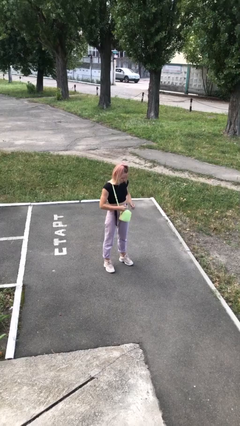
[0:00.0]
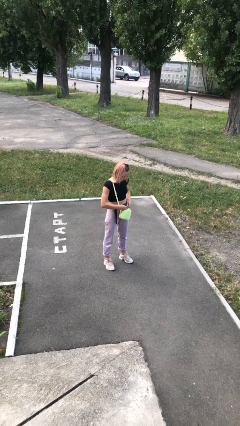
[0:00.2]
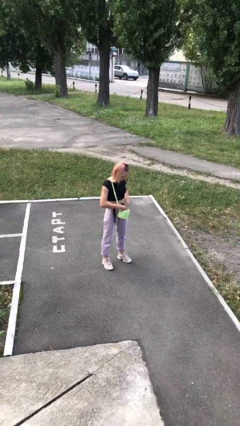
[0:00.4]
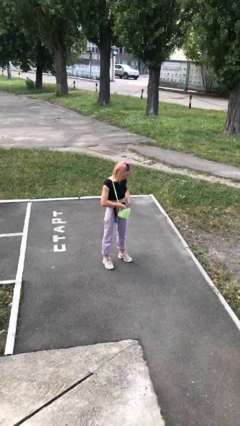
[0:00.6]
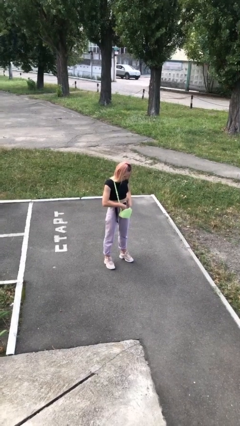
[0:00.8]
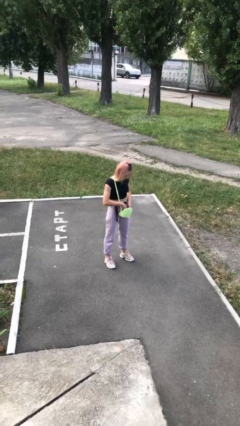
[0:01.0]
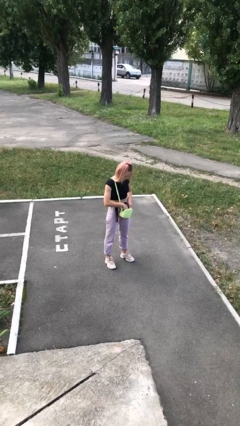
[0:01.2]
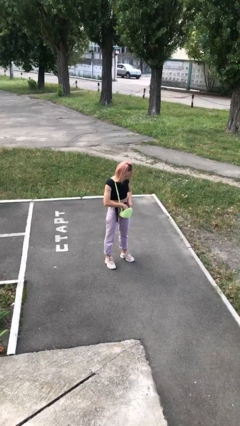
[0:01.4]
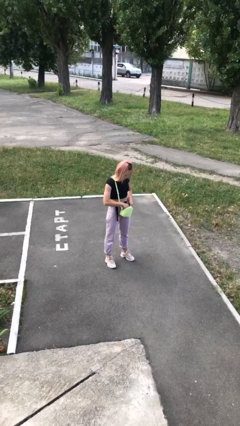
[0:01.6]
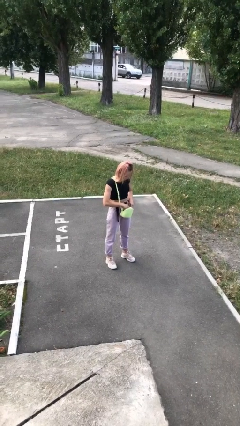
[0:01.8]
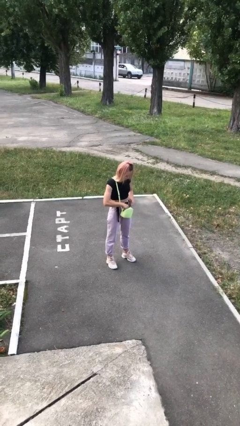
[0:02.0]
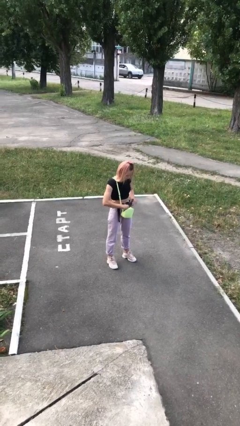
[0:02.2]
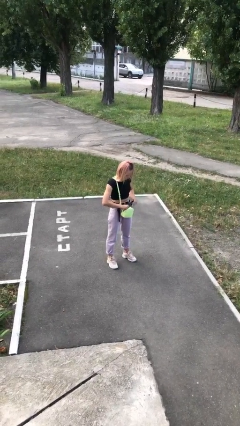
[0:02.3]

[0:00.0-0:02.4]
person searches in backpack

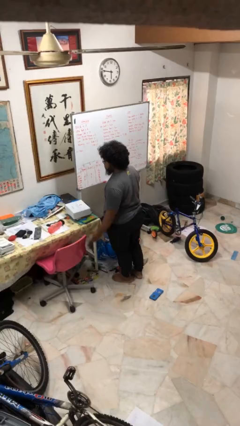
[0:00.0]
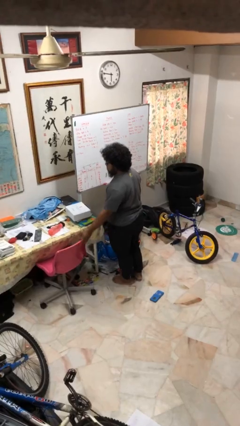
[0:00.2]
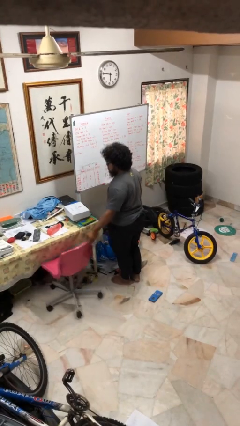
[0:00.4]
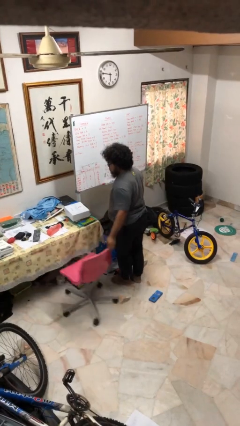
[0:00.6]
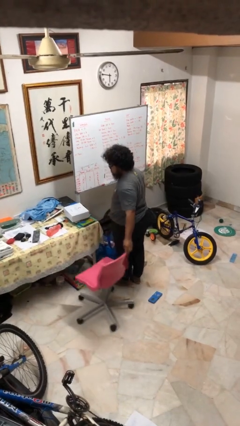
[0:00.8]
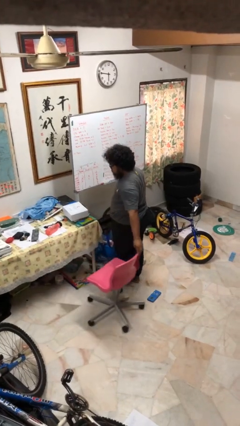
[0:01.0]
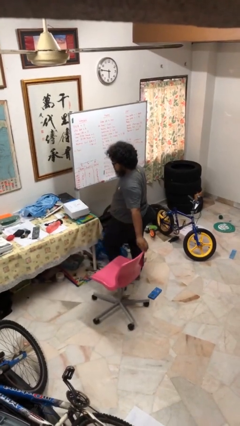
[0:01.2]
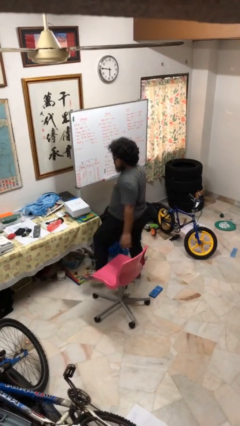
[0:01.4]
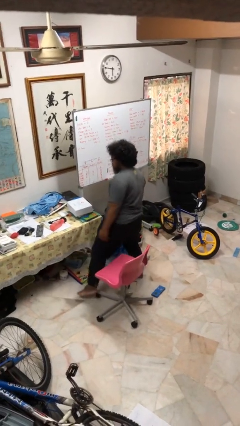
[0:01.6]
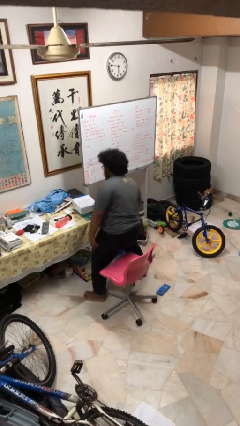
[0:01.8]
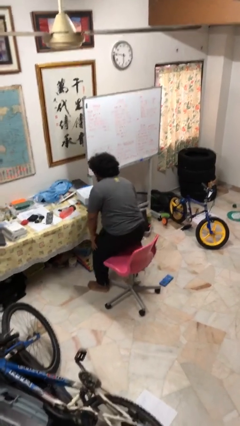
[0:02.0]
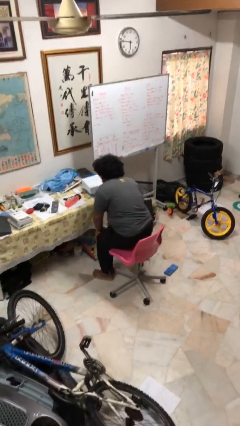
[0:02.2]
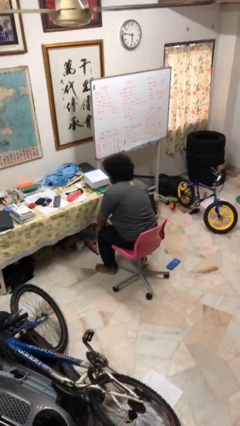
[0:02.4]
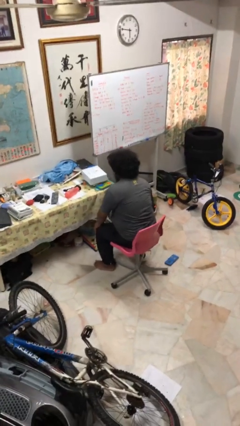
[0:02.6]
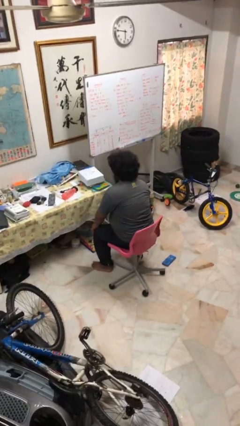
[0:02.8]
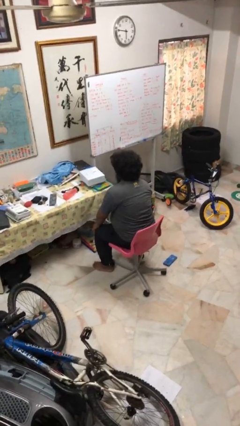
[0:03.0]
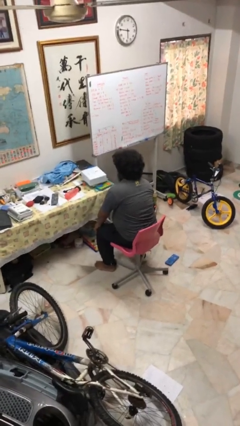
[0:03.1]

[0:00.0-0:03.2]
person sits down

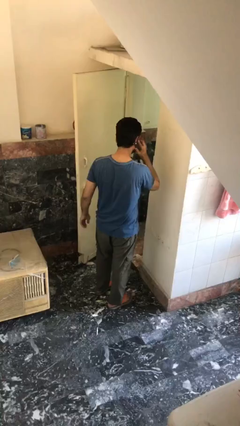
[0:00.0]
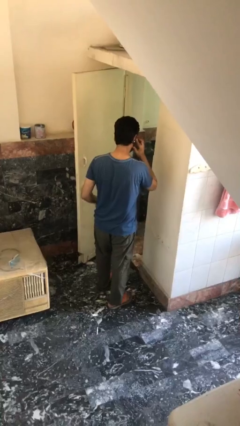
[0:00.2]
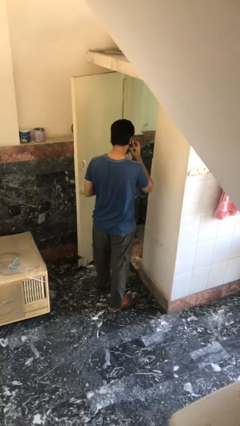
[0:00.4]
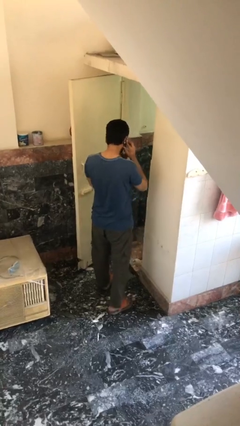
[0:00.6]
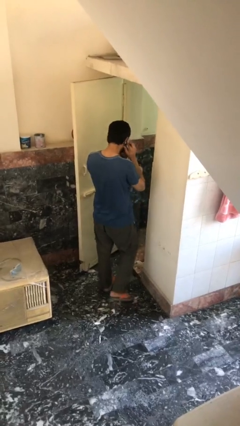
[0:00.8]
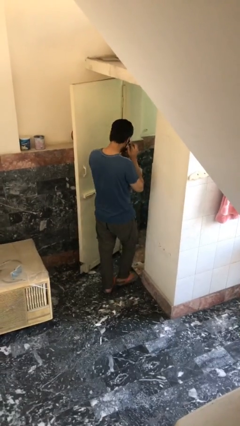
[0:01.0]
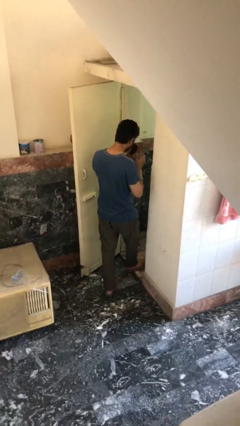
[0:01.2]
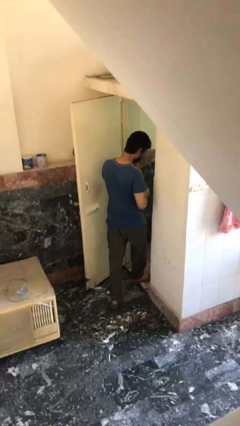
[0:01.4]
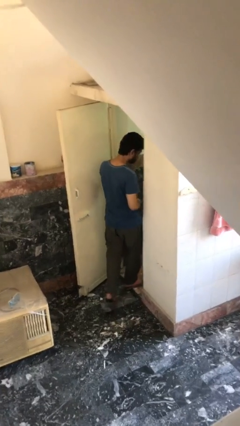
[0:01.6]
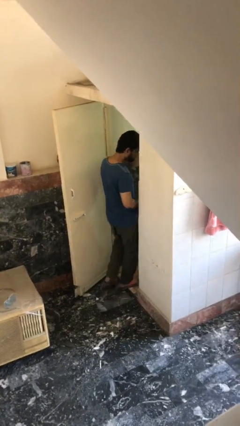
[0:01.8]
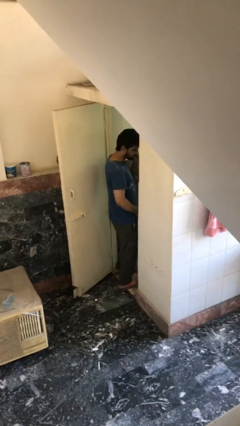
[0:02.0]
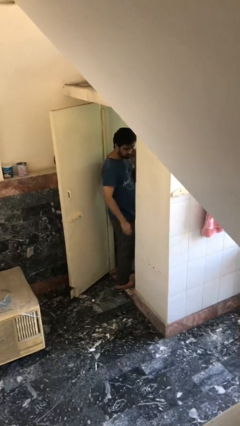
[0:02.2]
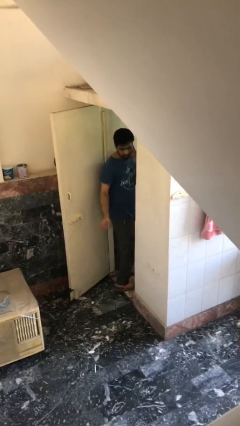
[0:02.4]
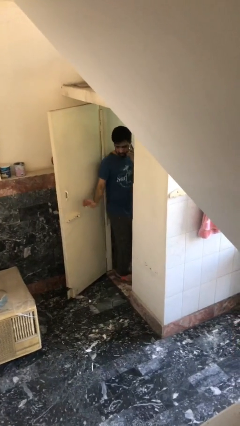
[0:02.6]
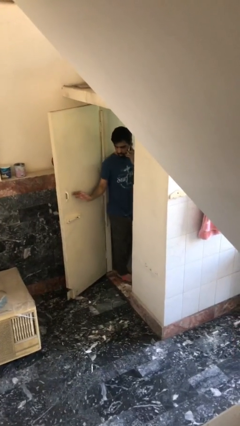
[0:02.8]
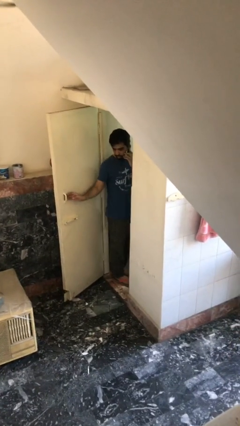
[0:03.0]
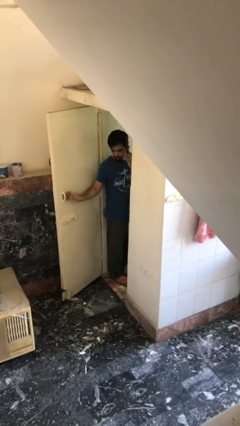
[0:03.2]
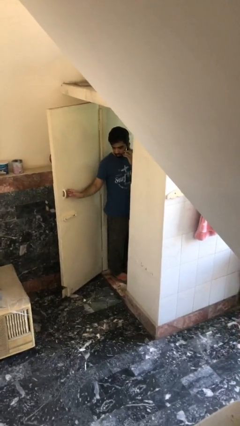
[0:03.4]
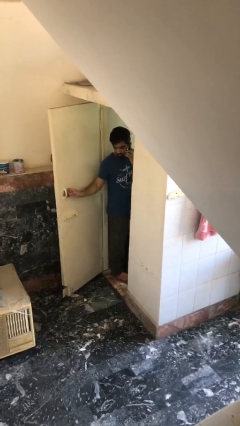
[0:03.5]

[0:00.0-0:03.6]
person exits scene through structure

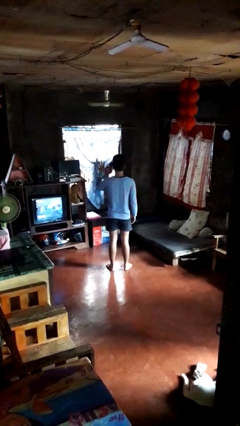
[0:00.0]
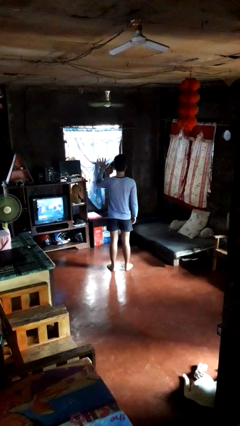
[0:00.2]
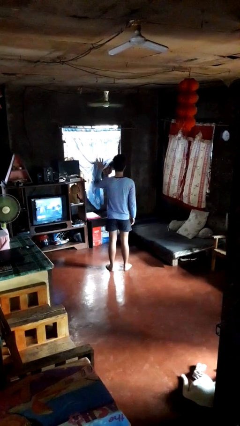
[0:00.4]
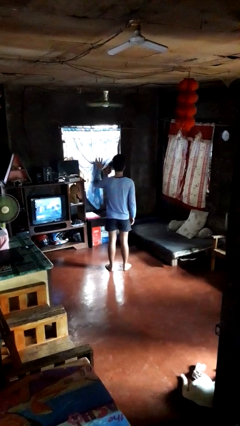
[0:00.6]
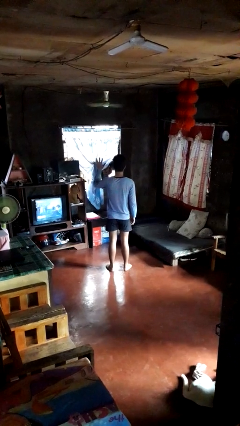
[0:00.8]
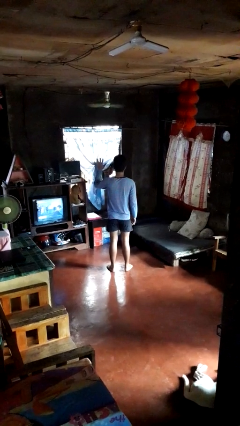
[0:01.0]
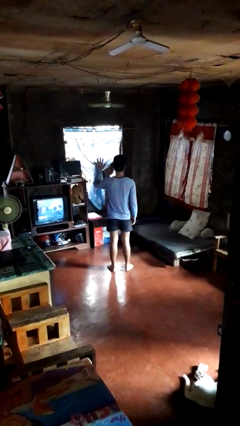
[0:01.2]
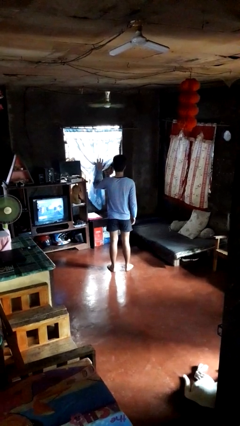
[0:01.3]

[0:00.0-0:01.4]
person gestures number five

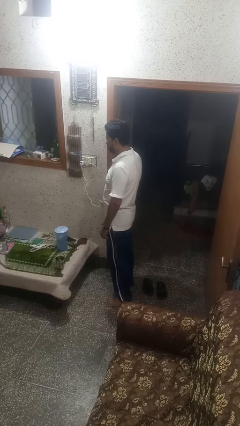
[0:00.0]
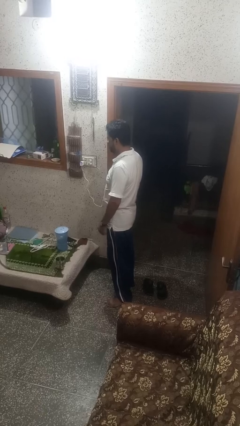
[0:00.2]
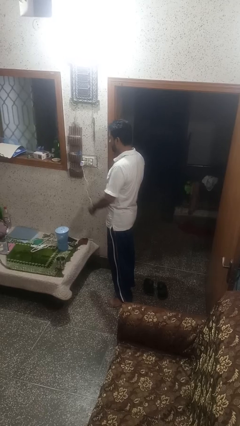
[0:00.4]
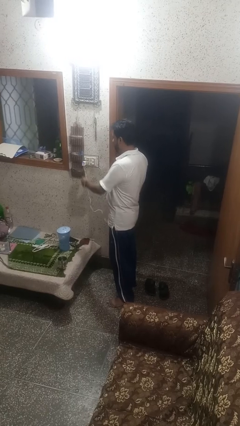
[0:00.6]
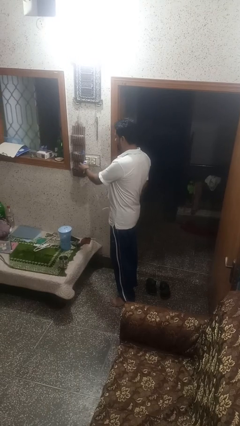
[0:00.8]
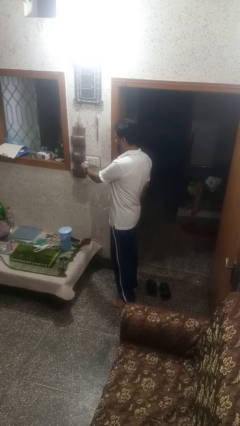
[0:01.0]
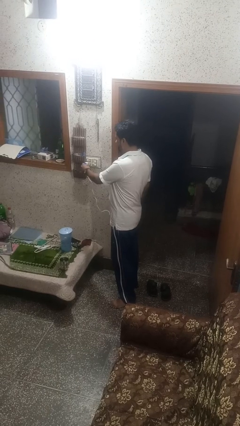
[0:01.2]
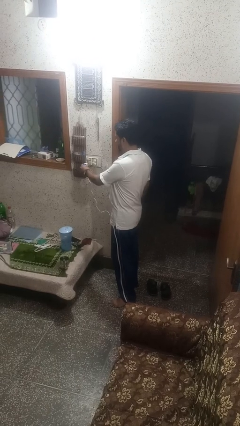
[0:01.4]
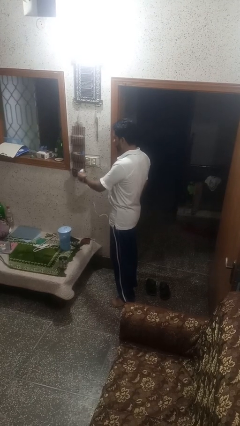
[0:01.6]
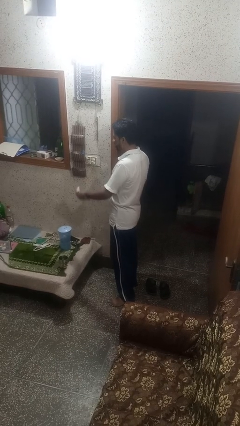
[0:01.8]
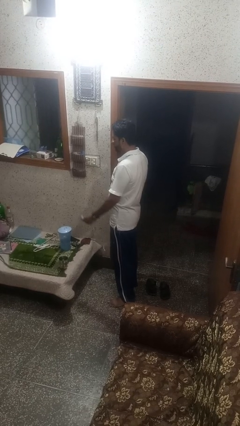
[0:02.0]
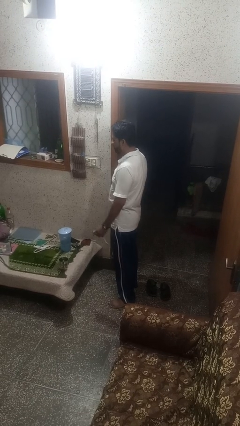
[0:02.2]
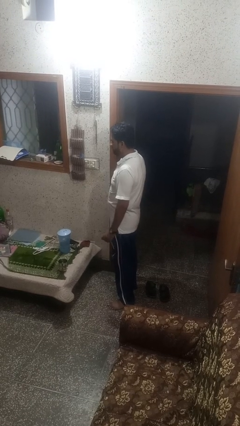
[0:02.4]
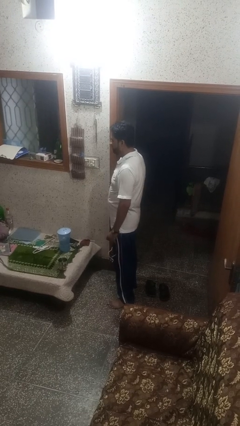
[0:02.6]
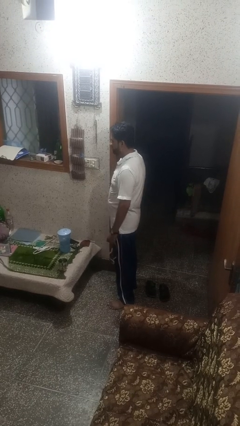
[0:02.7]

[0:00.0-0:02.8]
person unplugs from electrical socket

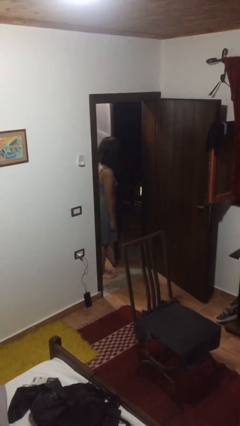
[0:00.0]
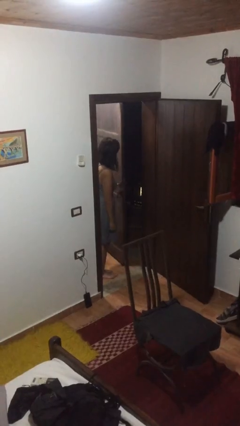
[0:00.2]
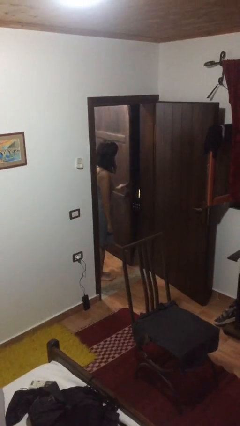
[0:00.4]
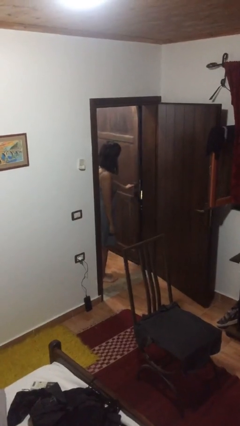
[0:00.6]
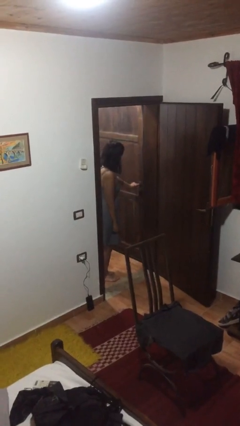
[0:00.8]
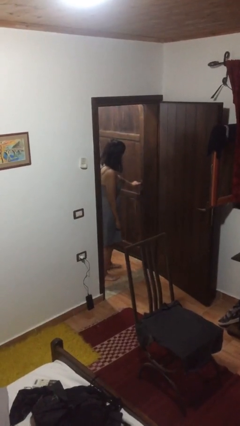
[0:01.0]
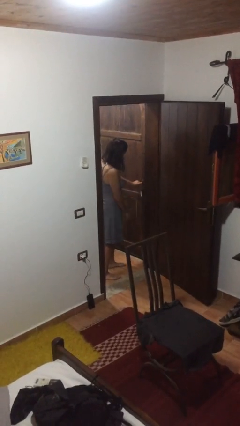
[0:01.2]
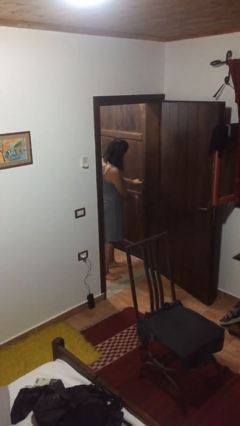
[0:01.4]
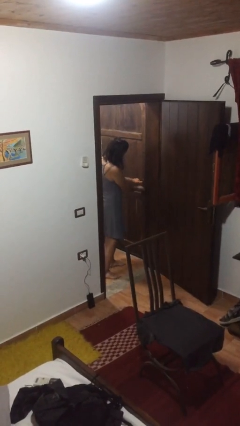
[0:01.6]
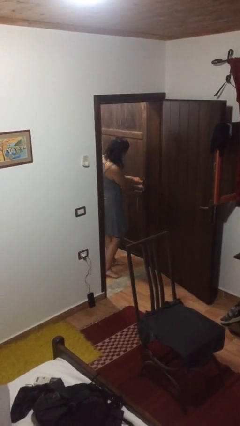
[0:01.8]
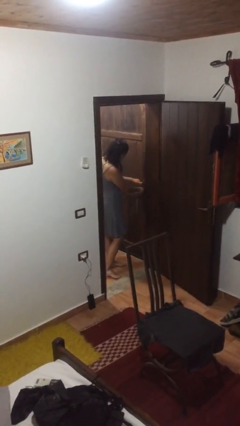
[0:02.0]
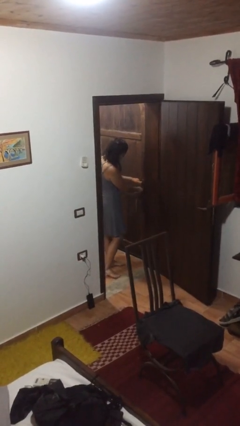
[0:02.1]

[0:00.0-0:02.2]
person closes facility door

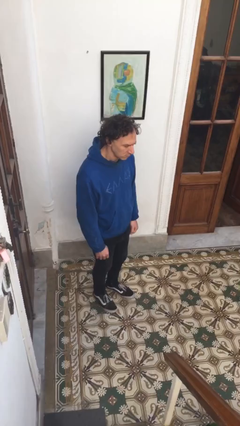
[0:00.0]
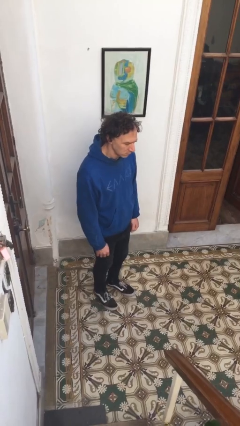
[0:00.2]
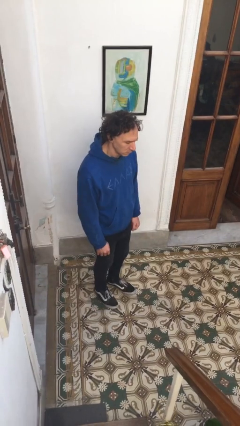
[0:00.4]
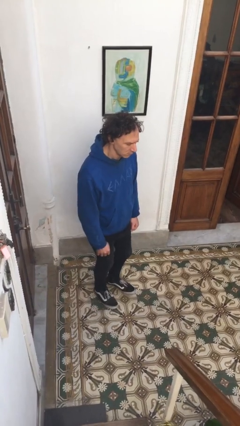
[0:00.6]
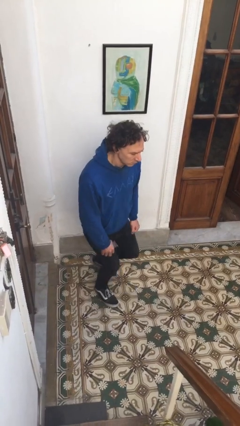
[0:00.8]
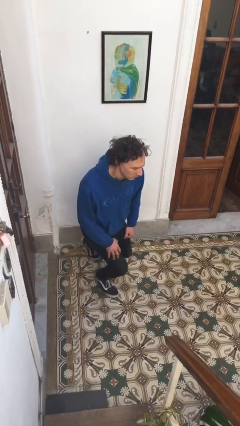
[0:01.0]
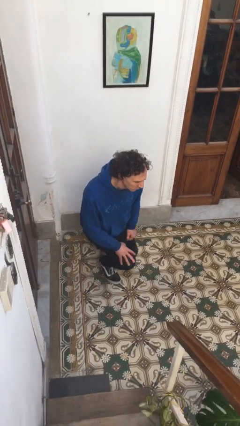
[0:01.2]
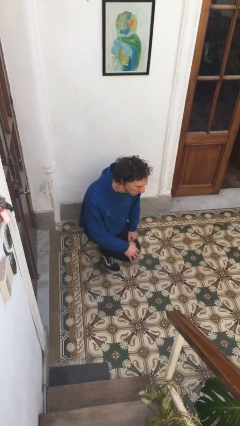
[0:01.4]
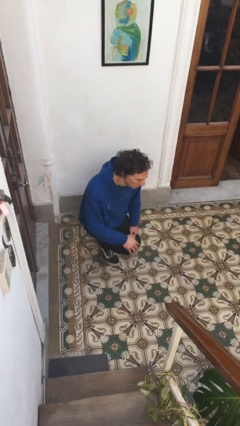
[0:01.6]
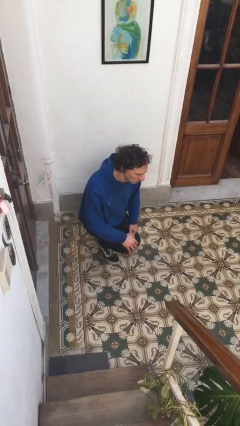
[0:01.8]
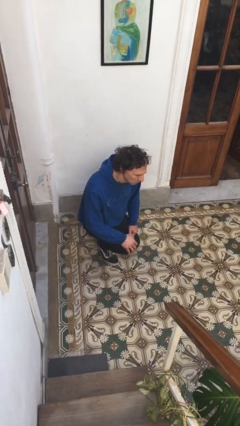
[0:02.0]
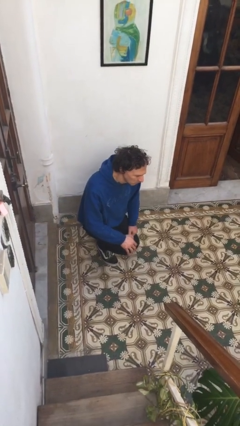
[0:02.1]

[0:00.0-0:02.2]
person kneels
